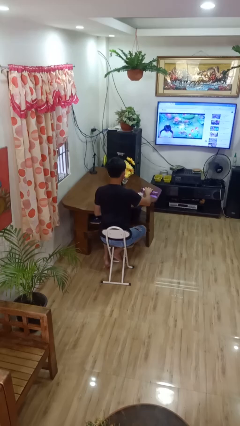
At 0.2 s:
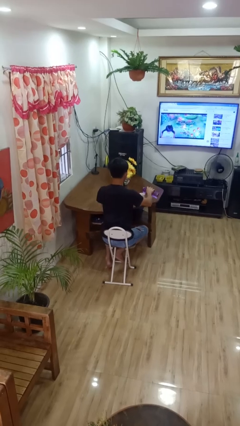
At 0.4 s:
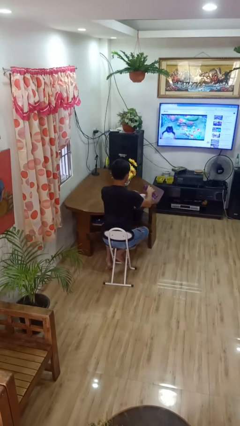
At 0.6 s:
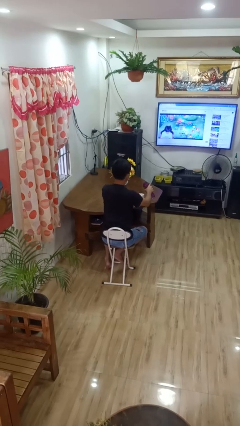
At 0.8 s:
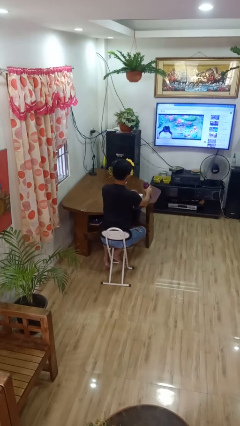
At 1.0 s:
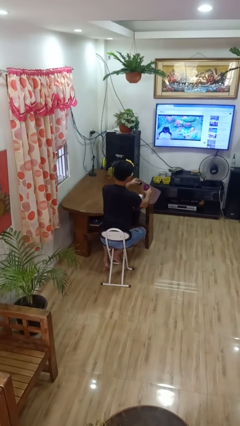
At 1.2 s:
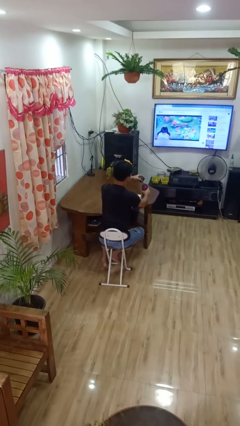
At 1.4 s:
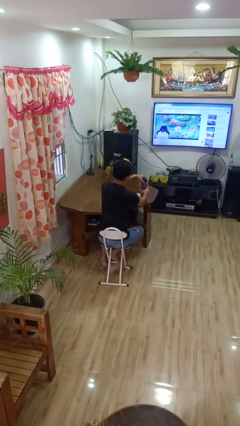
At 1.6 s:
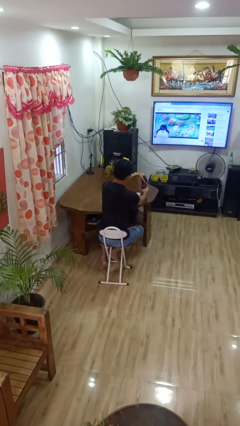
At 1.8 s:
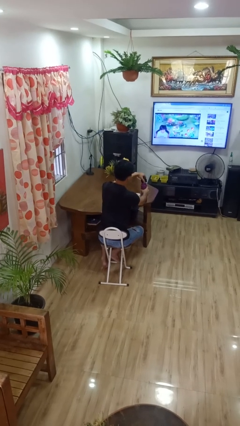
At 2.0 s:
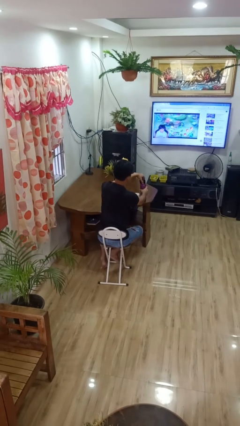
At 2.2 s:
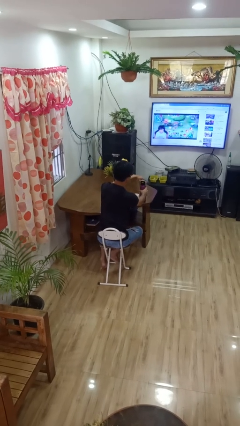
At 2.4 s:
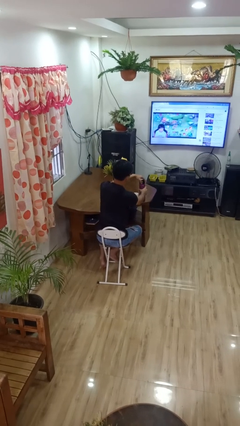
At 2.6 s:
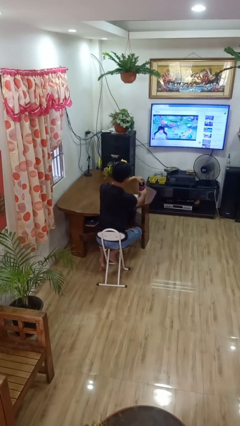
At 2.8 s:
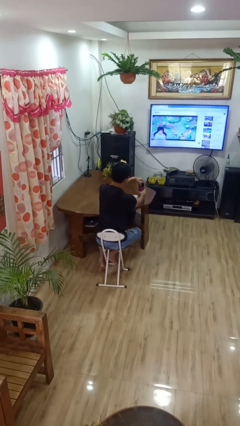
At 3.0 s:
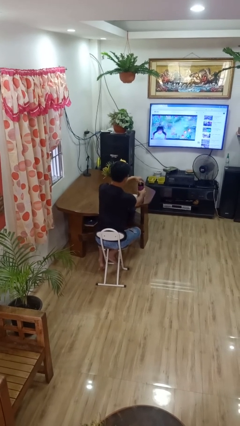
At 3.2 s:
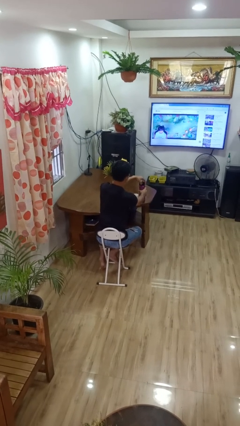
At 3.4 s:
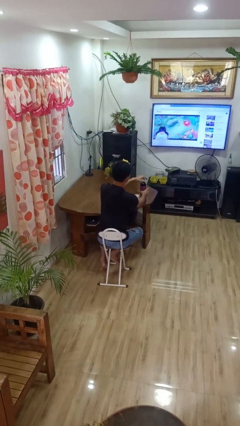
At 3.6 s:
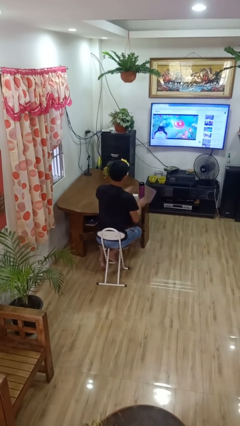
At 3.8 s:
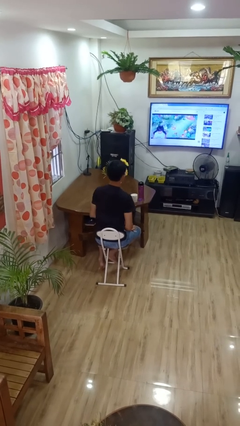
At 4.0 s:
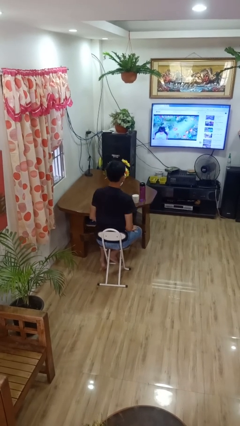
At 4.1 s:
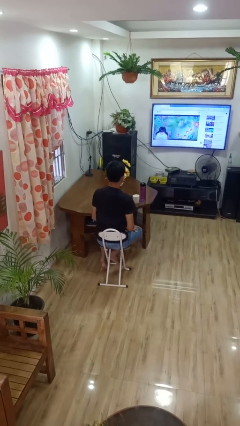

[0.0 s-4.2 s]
person screws lid to bottle

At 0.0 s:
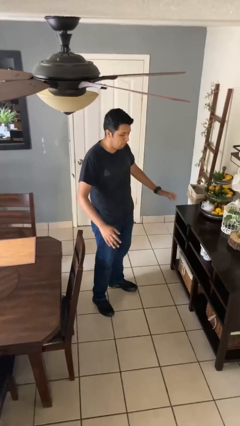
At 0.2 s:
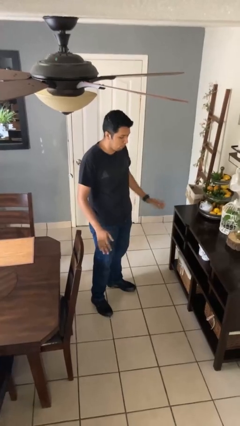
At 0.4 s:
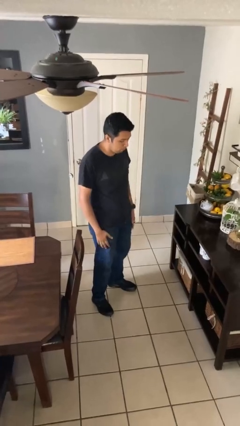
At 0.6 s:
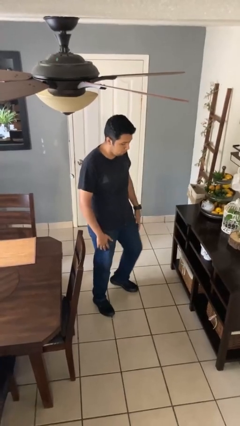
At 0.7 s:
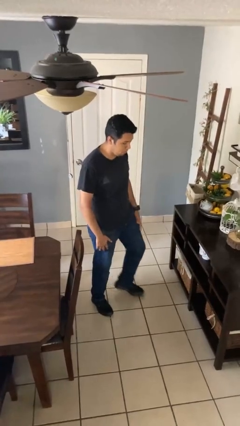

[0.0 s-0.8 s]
person slaps hands on thighs

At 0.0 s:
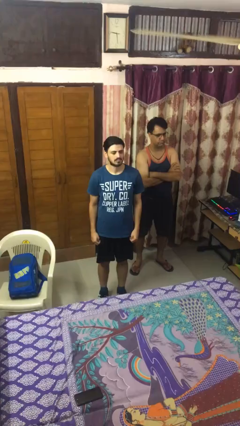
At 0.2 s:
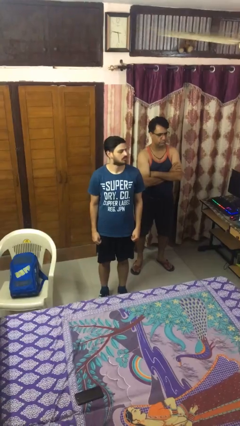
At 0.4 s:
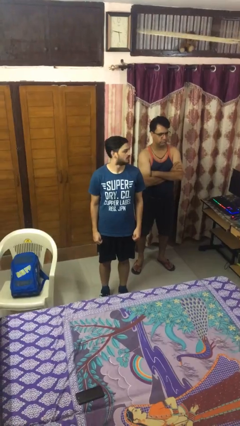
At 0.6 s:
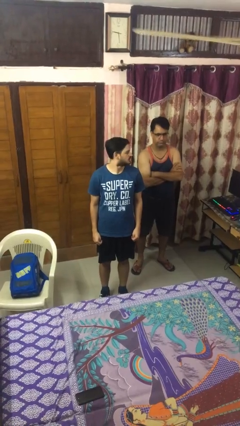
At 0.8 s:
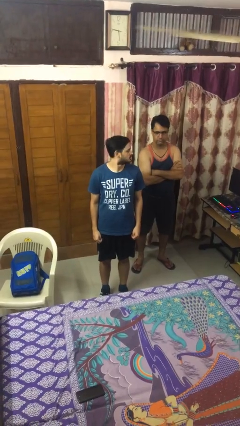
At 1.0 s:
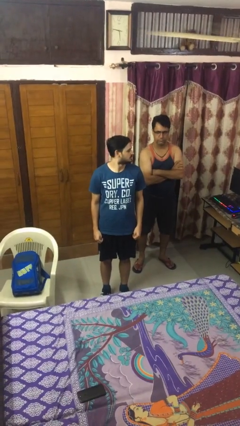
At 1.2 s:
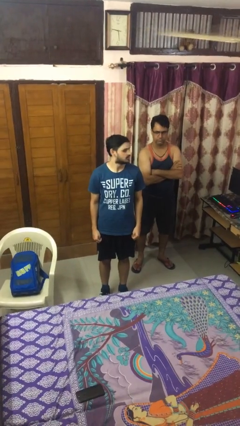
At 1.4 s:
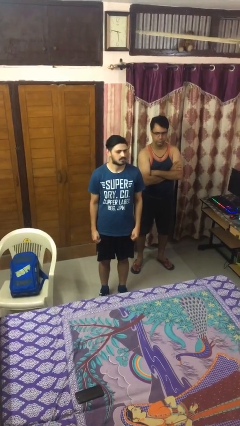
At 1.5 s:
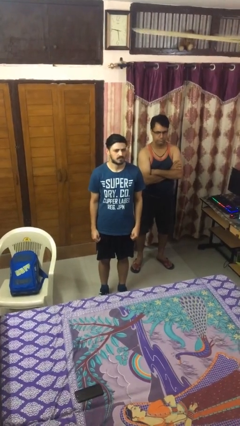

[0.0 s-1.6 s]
person looks over shoulder

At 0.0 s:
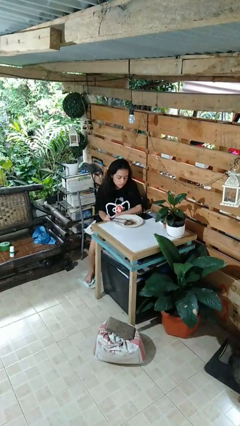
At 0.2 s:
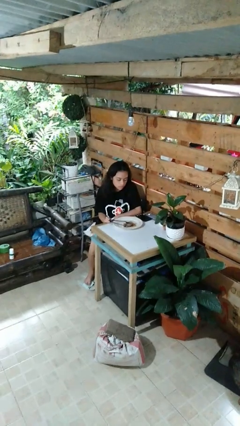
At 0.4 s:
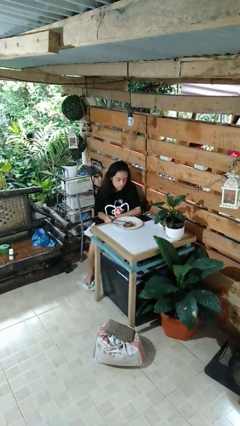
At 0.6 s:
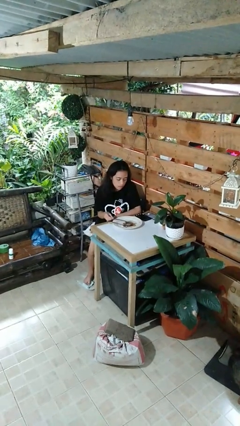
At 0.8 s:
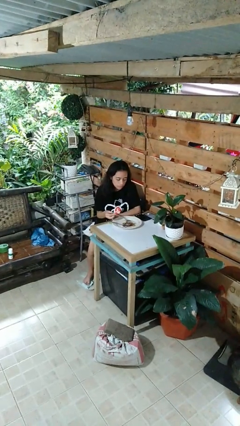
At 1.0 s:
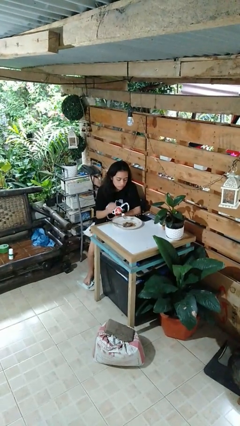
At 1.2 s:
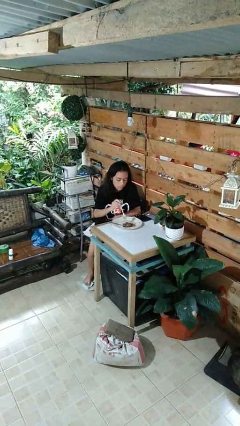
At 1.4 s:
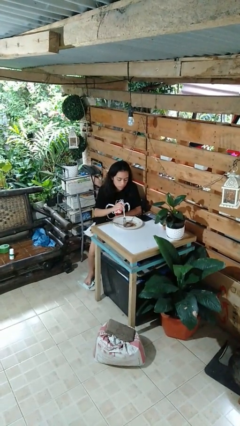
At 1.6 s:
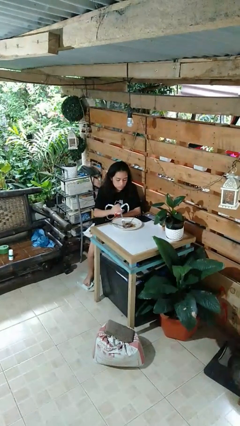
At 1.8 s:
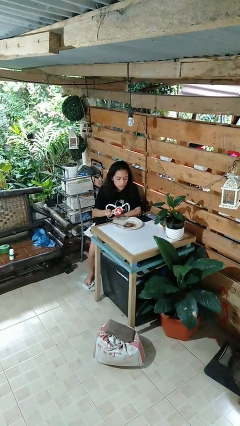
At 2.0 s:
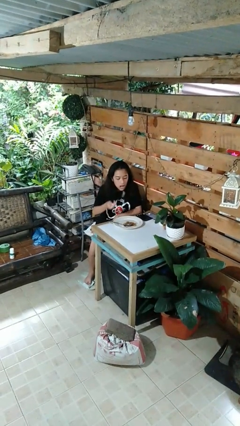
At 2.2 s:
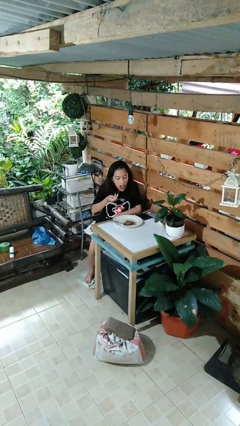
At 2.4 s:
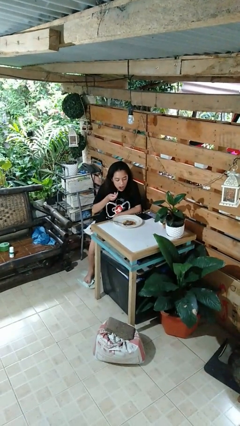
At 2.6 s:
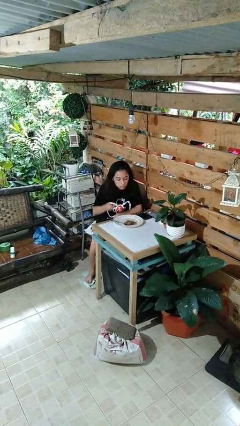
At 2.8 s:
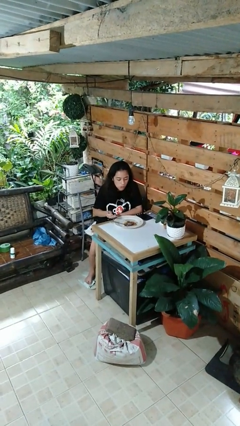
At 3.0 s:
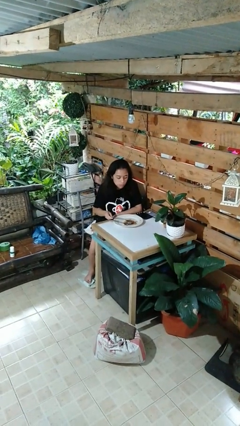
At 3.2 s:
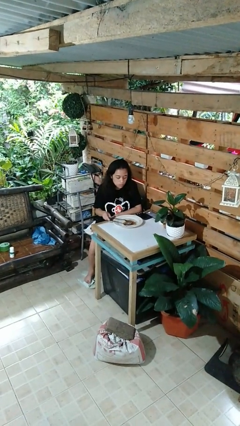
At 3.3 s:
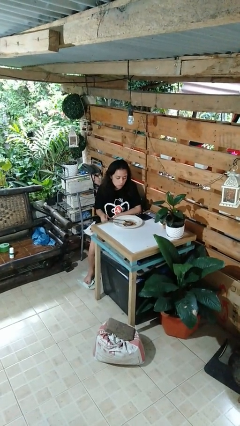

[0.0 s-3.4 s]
person eats with utensil

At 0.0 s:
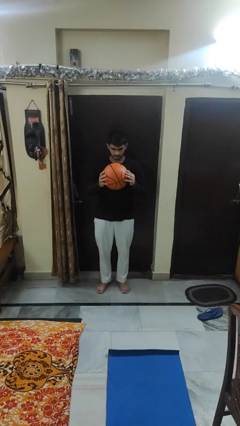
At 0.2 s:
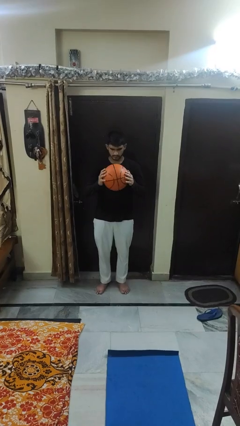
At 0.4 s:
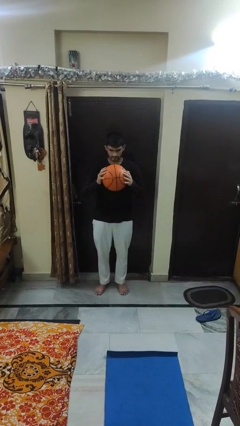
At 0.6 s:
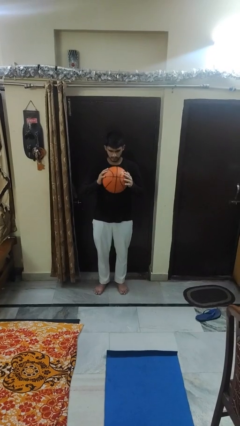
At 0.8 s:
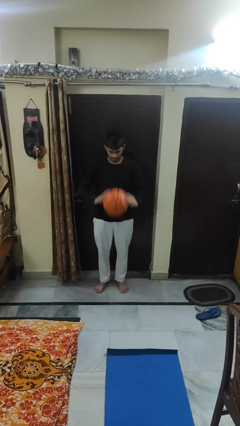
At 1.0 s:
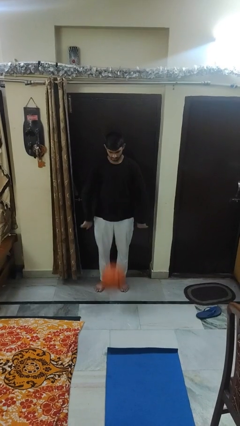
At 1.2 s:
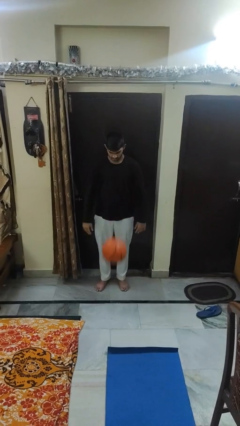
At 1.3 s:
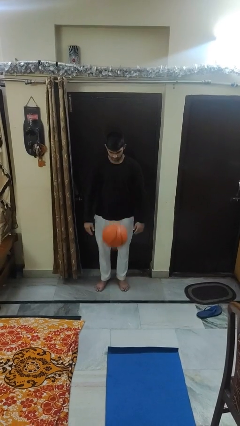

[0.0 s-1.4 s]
person bounces ball on floor

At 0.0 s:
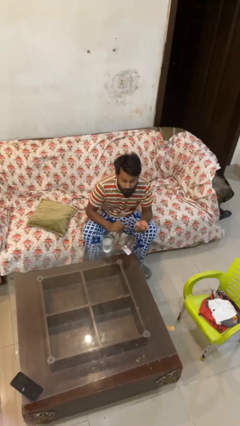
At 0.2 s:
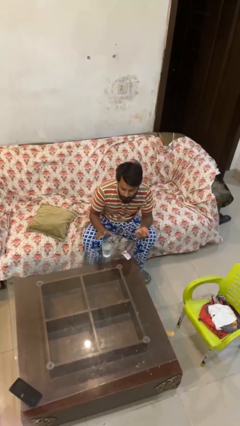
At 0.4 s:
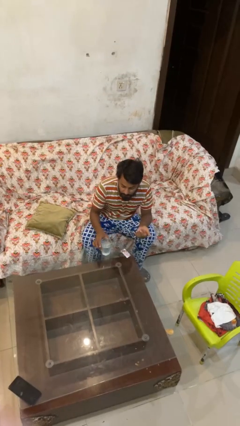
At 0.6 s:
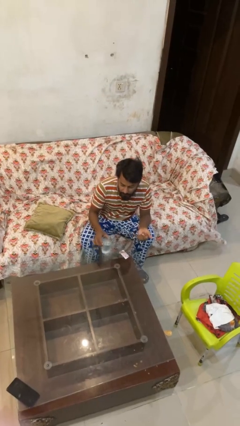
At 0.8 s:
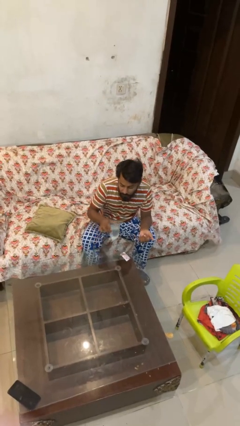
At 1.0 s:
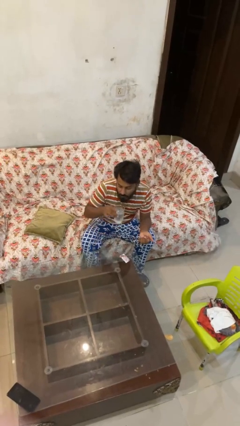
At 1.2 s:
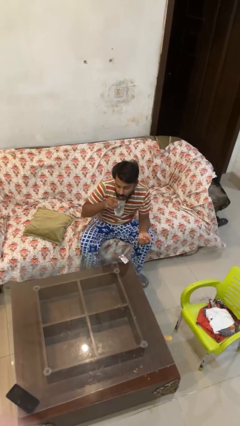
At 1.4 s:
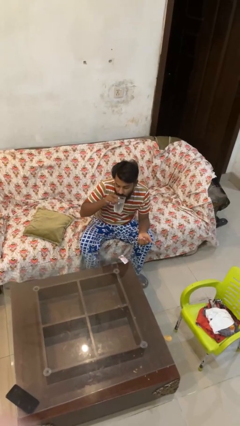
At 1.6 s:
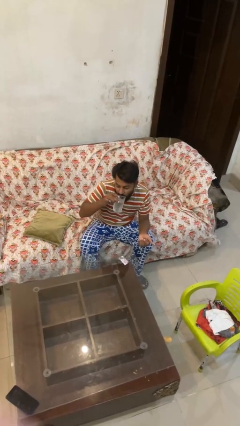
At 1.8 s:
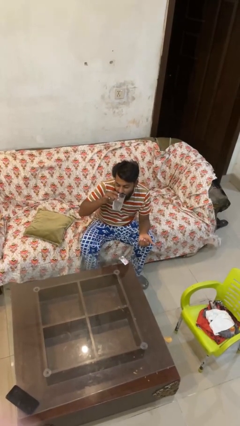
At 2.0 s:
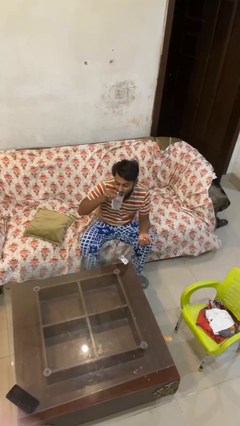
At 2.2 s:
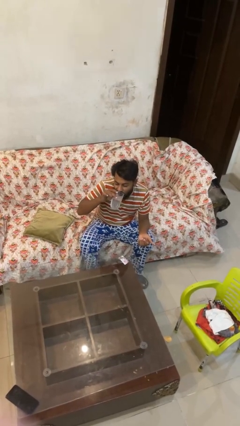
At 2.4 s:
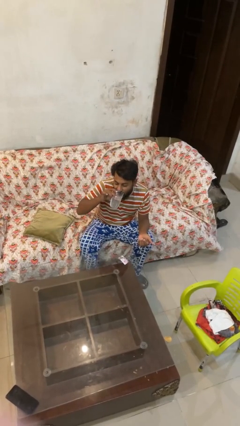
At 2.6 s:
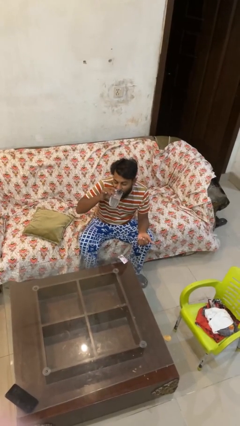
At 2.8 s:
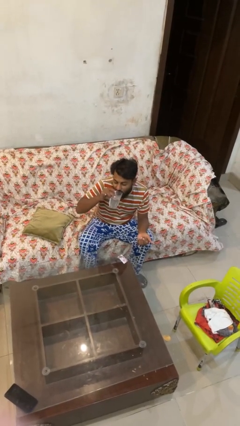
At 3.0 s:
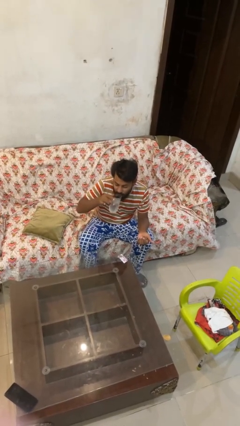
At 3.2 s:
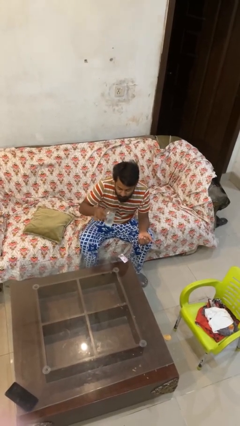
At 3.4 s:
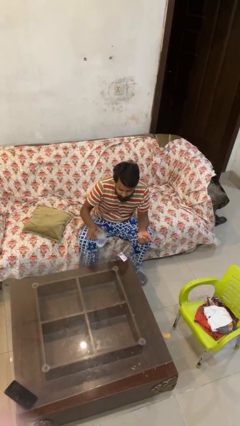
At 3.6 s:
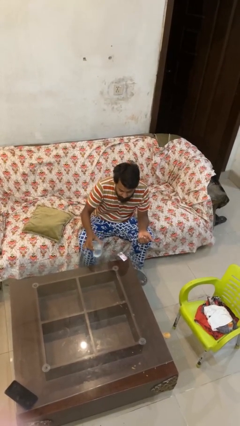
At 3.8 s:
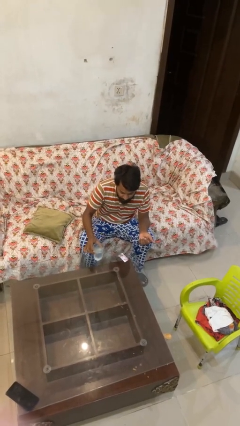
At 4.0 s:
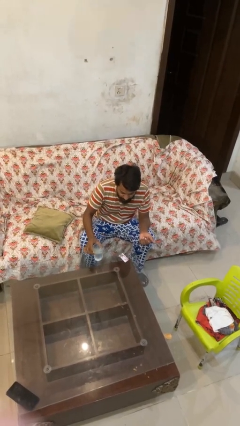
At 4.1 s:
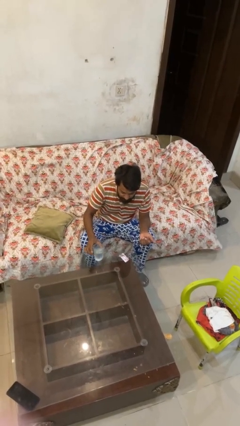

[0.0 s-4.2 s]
person drinks from cup

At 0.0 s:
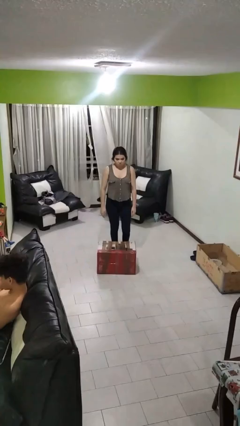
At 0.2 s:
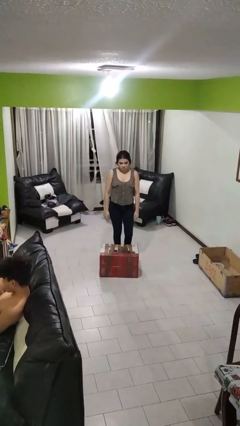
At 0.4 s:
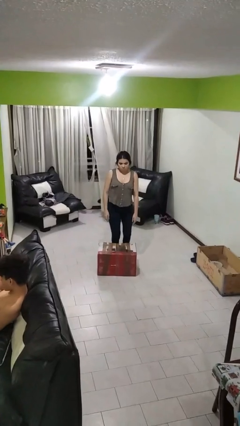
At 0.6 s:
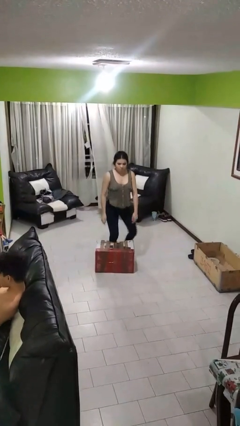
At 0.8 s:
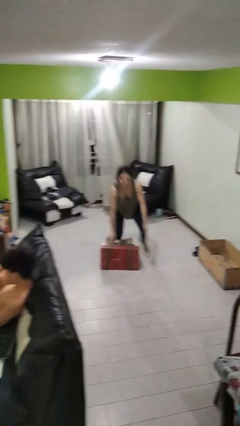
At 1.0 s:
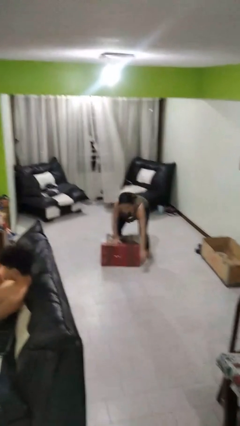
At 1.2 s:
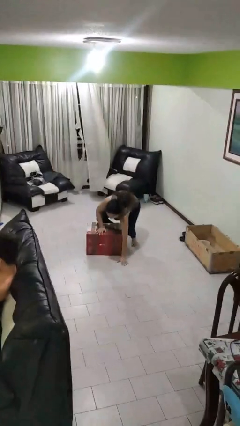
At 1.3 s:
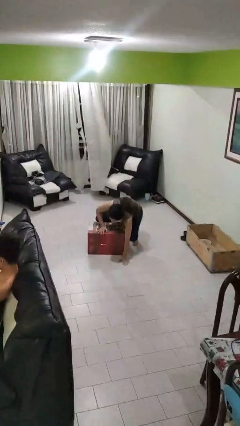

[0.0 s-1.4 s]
person trips on object on floor

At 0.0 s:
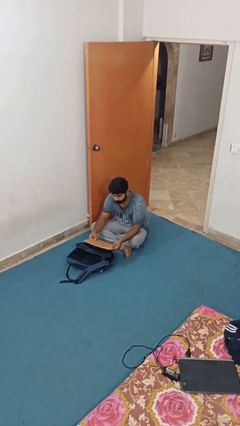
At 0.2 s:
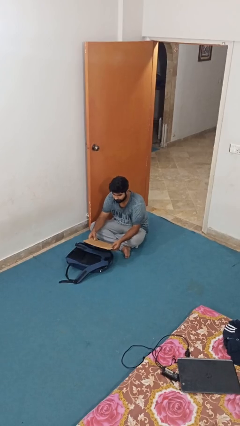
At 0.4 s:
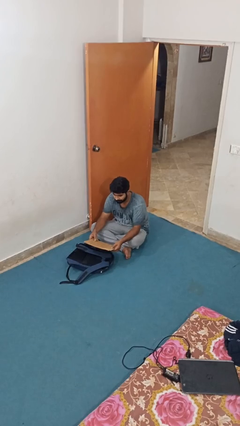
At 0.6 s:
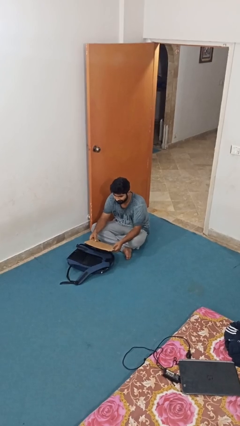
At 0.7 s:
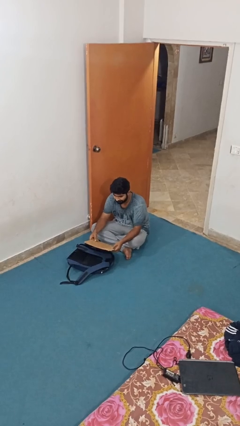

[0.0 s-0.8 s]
person takes object from backpack
